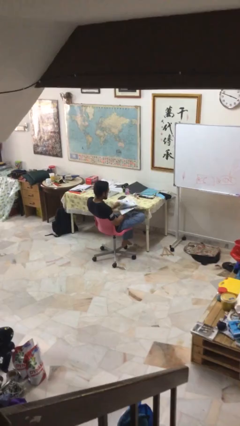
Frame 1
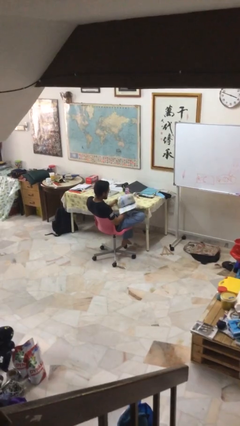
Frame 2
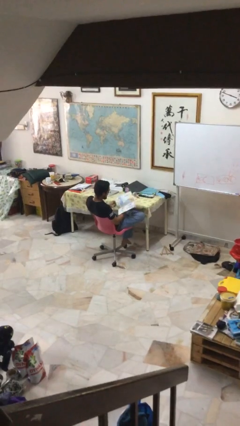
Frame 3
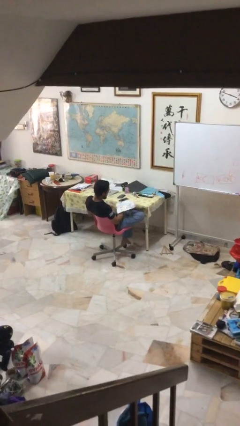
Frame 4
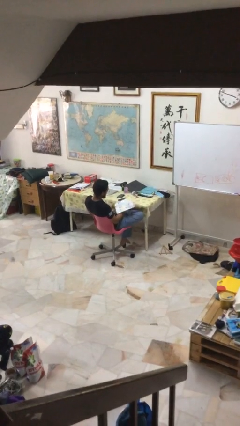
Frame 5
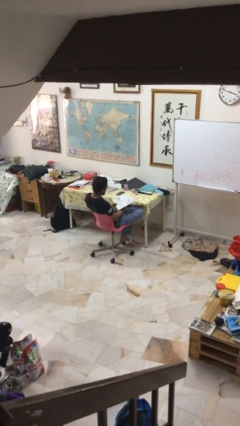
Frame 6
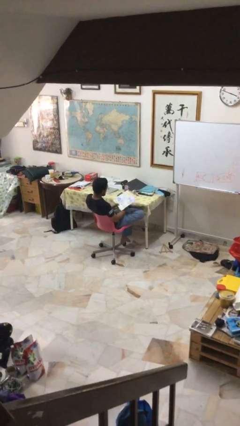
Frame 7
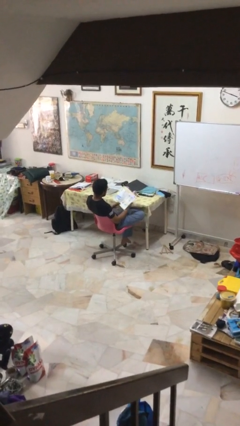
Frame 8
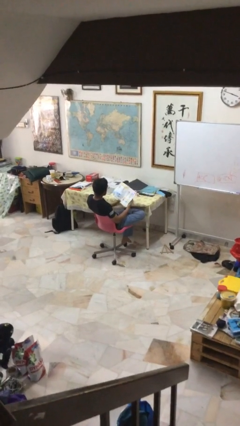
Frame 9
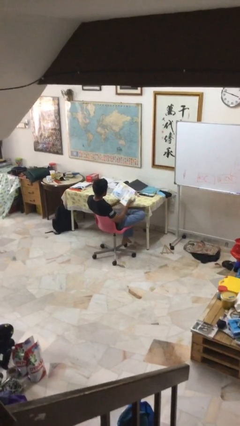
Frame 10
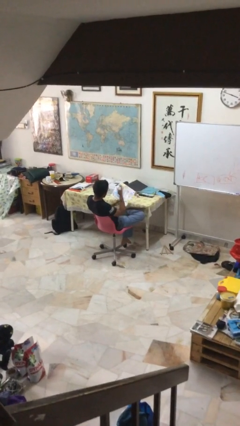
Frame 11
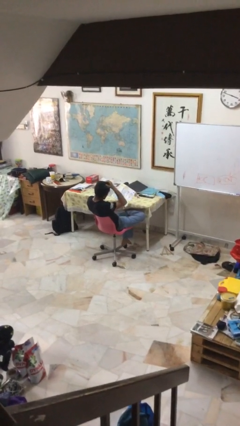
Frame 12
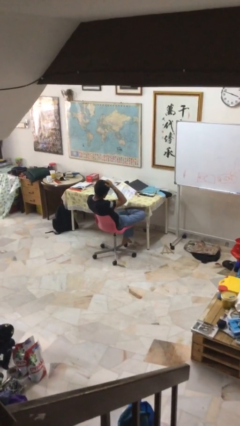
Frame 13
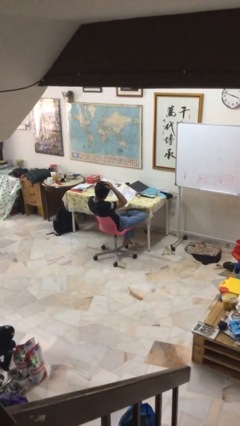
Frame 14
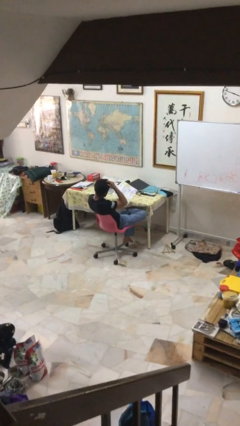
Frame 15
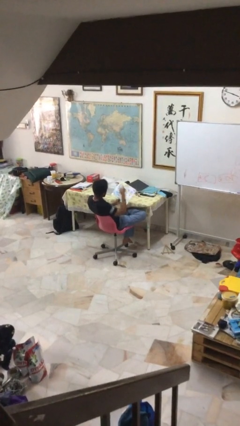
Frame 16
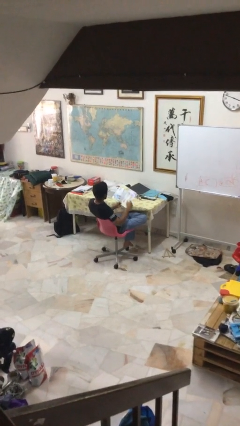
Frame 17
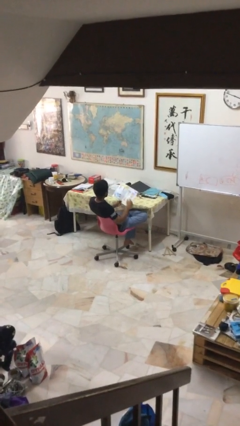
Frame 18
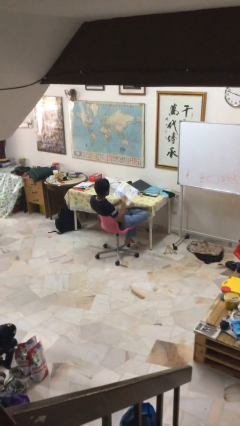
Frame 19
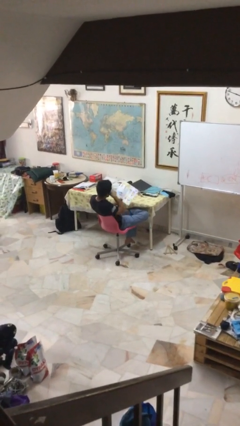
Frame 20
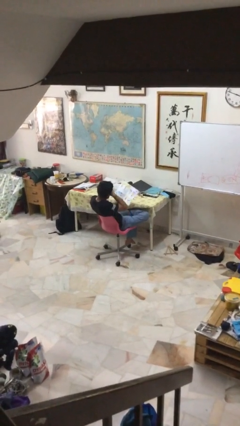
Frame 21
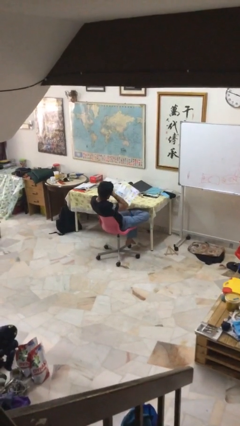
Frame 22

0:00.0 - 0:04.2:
person reads document

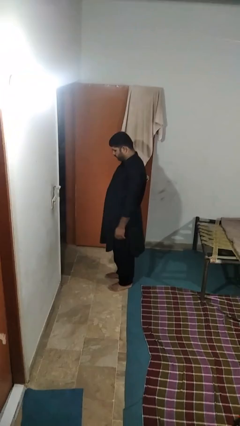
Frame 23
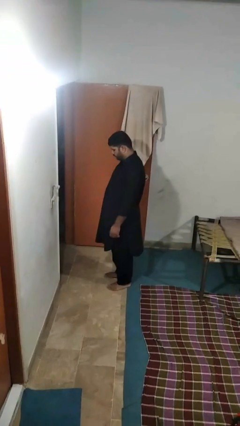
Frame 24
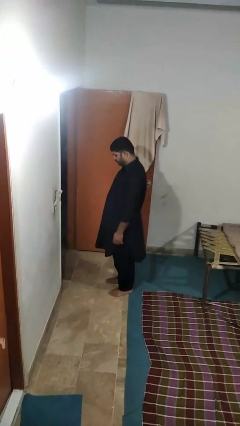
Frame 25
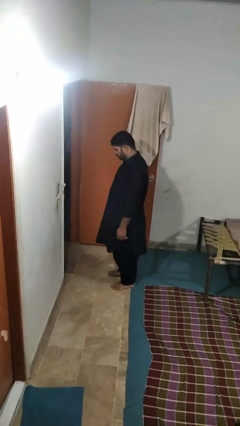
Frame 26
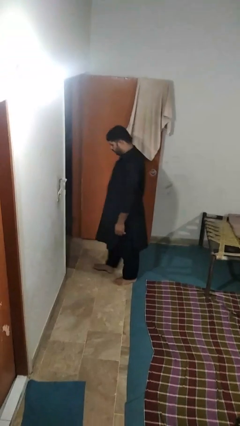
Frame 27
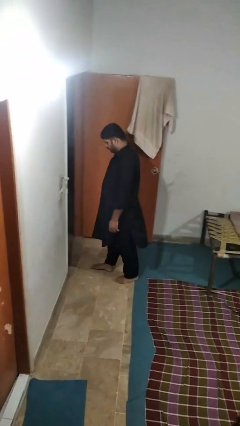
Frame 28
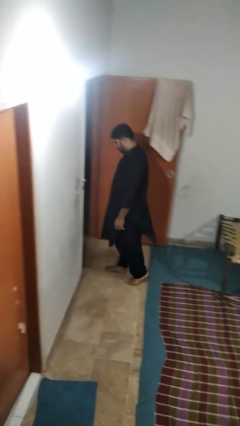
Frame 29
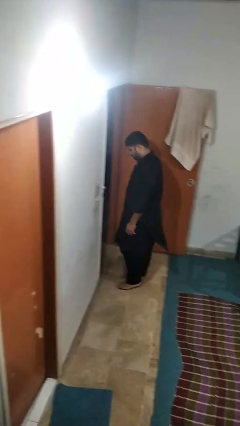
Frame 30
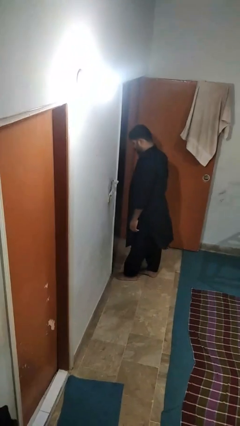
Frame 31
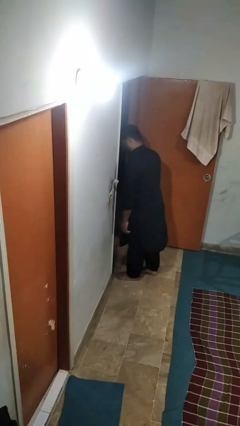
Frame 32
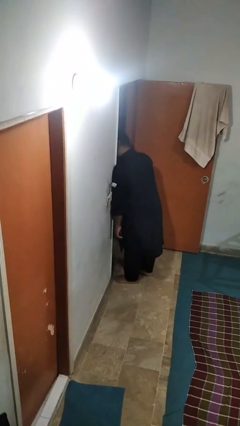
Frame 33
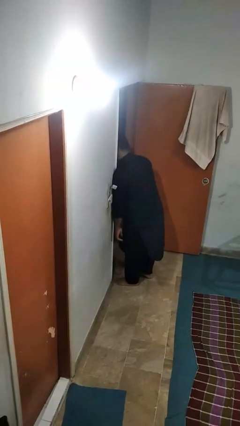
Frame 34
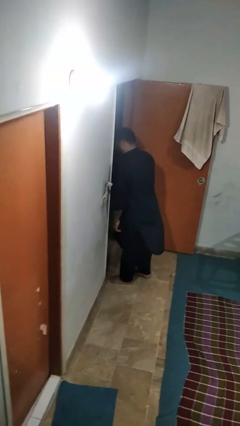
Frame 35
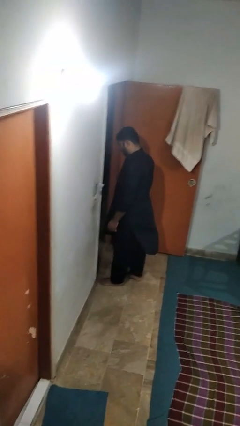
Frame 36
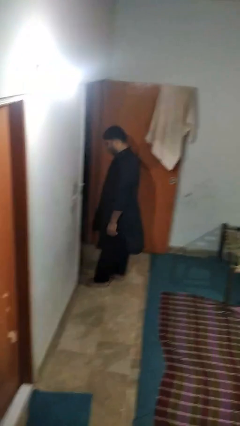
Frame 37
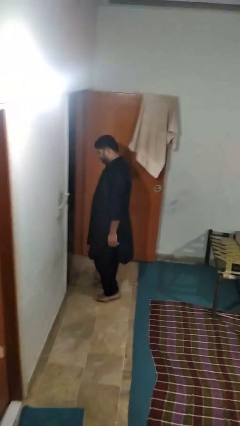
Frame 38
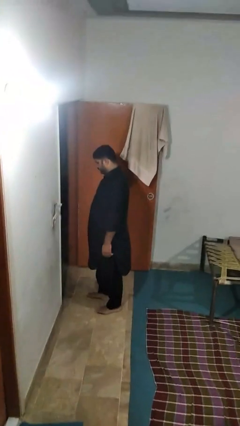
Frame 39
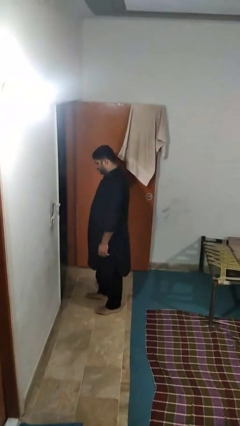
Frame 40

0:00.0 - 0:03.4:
person bumps into wall

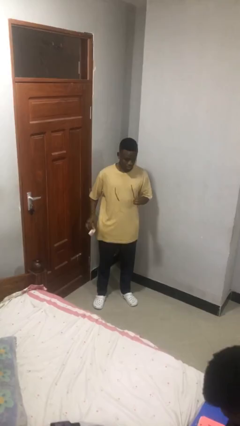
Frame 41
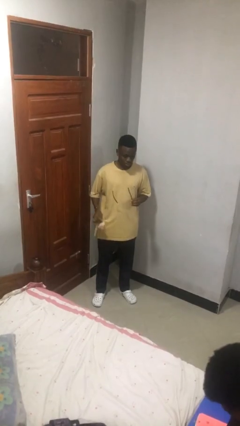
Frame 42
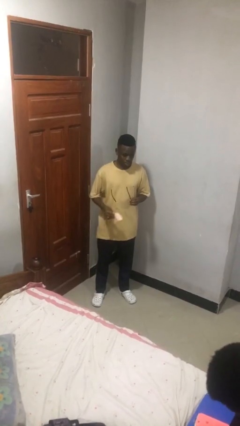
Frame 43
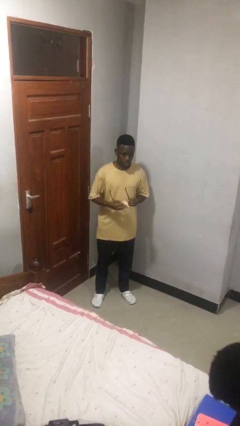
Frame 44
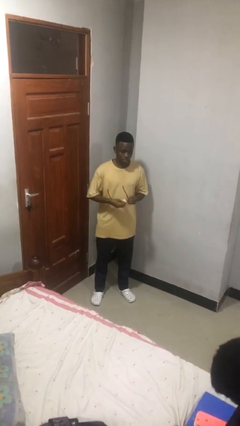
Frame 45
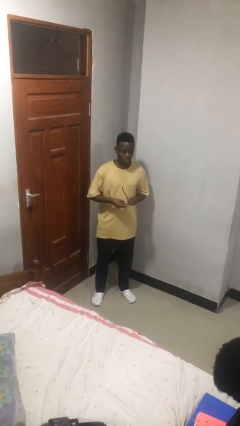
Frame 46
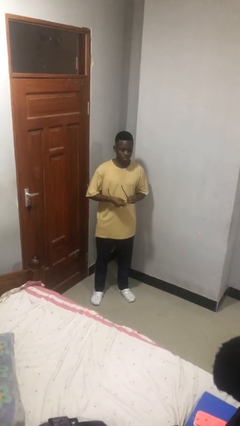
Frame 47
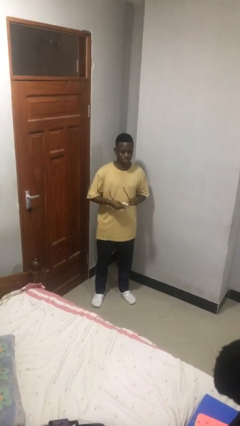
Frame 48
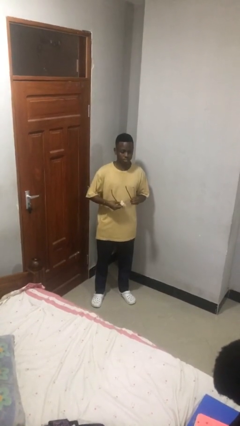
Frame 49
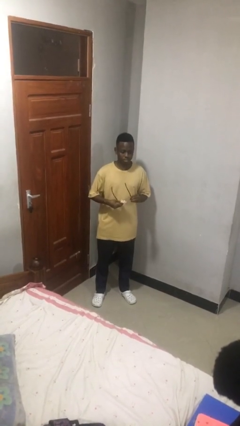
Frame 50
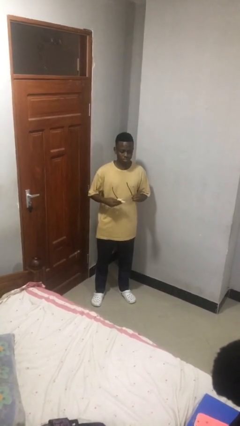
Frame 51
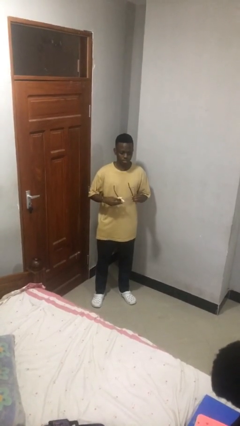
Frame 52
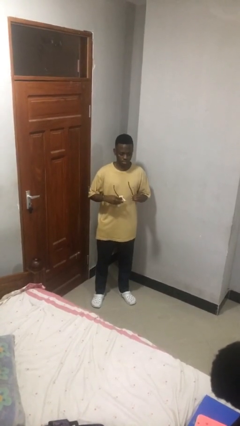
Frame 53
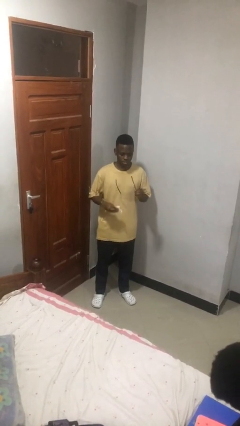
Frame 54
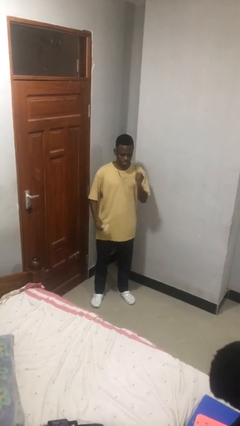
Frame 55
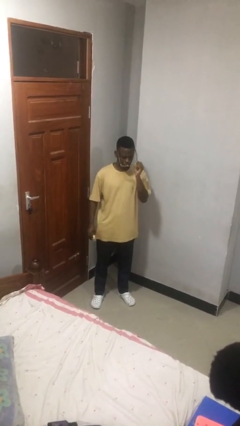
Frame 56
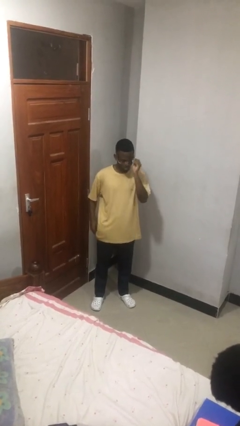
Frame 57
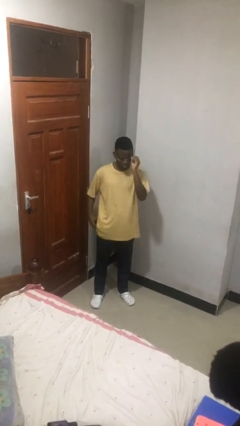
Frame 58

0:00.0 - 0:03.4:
person cleans eyeglasses

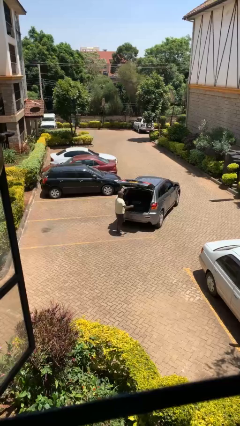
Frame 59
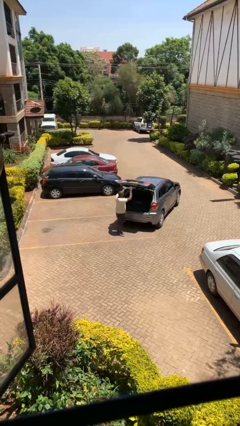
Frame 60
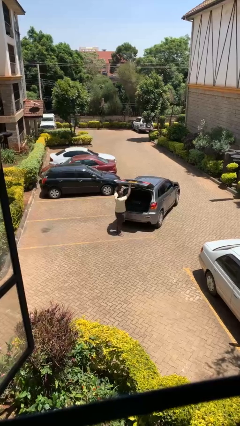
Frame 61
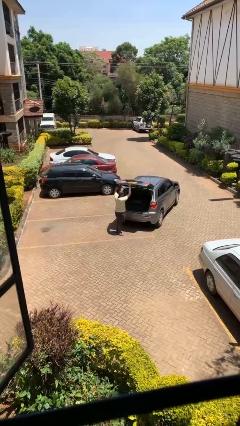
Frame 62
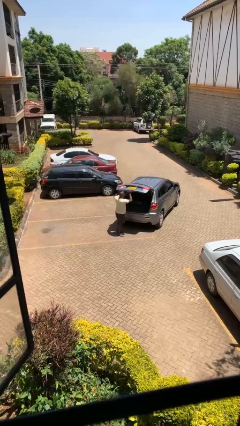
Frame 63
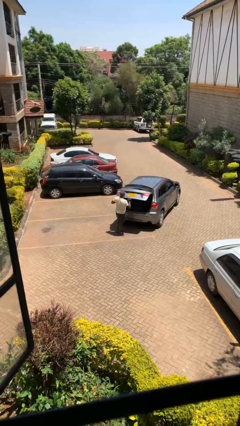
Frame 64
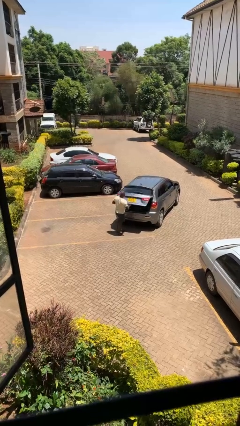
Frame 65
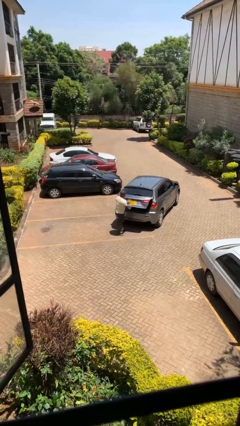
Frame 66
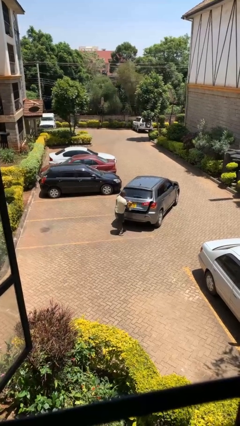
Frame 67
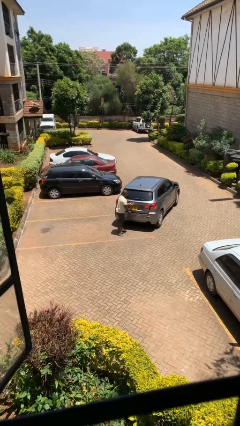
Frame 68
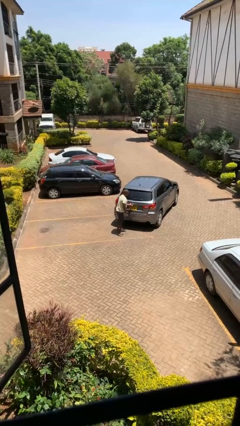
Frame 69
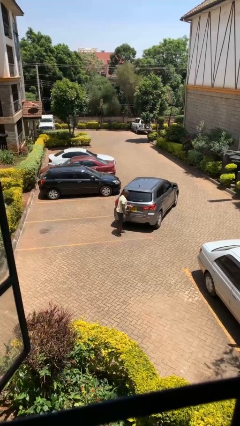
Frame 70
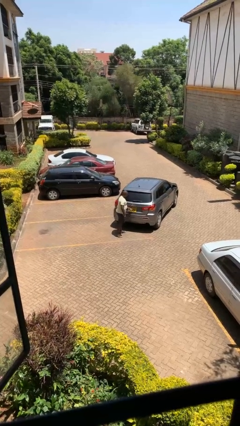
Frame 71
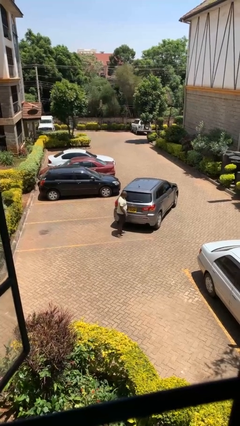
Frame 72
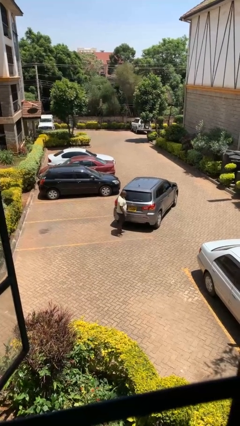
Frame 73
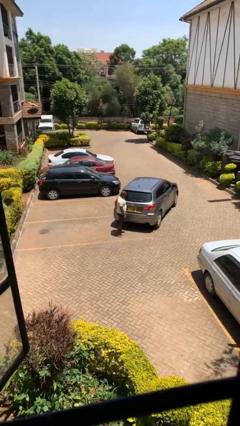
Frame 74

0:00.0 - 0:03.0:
person closes car trunk

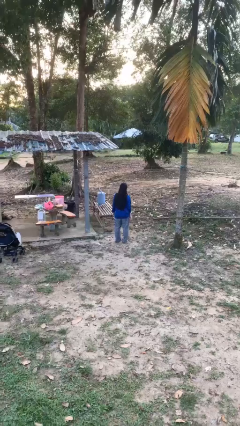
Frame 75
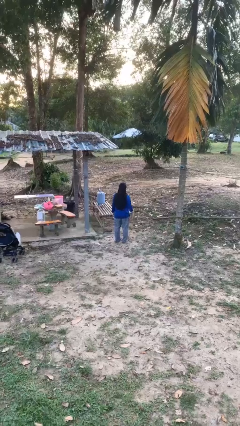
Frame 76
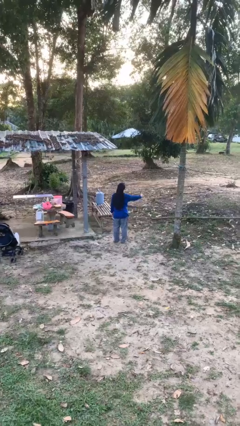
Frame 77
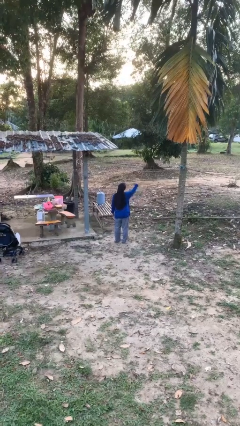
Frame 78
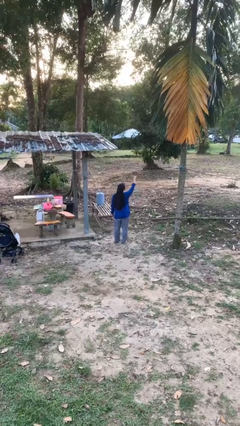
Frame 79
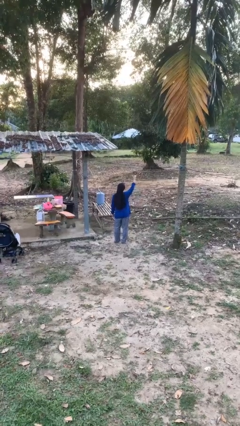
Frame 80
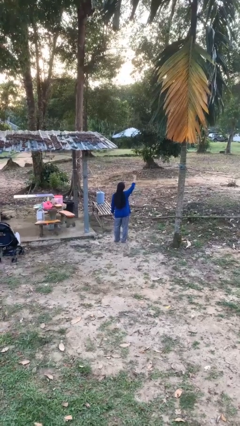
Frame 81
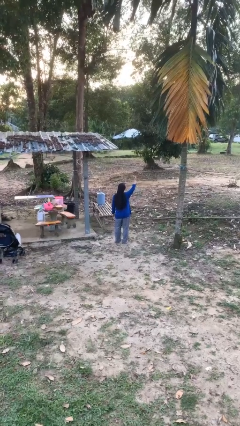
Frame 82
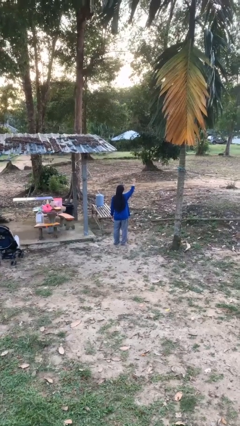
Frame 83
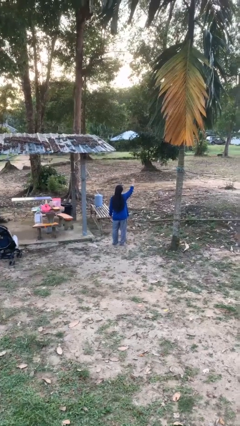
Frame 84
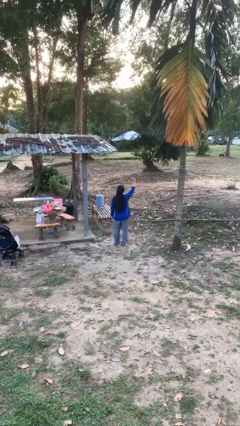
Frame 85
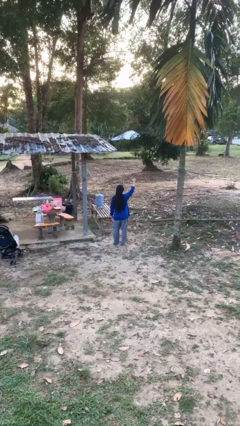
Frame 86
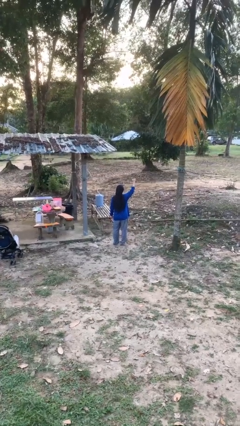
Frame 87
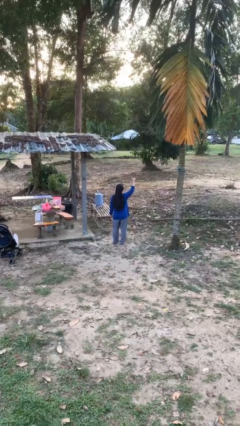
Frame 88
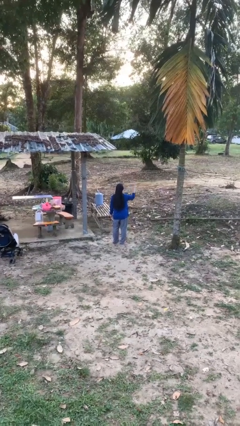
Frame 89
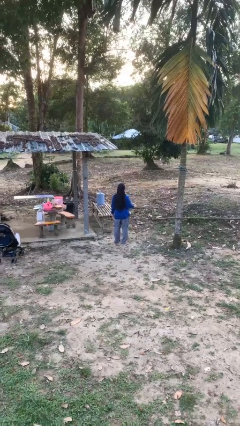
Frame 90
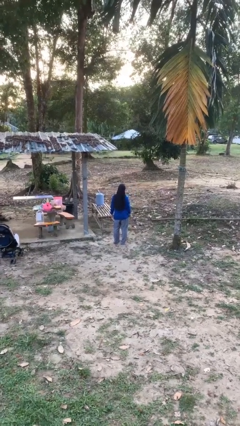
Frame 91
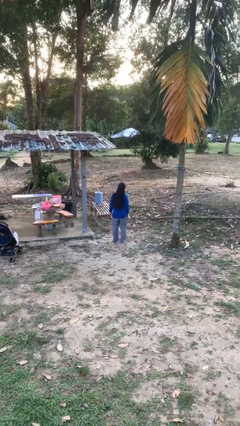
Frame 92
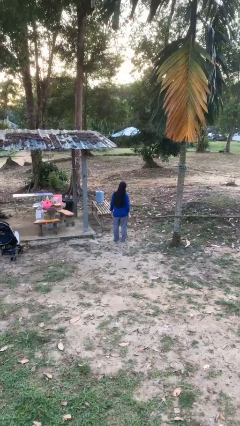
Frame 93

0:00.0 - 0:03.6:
person gestures hang loose
